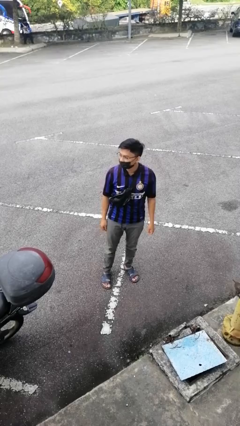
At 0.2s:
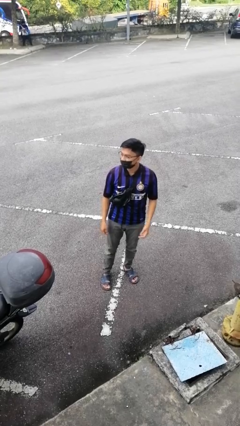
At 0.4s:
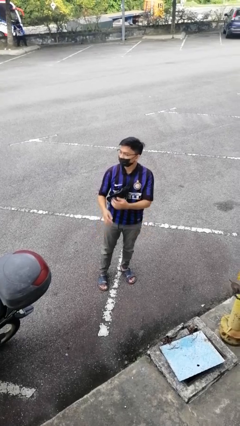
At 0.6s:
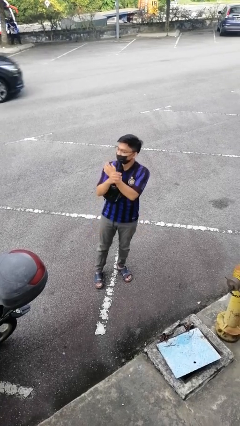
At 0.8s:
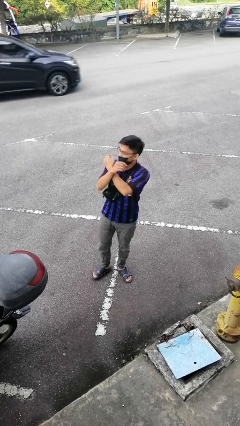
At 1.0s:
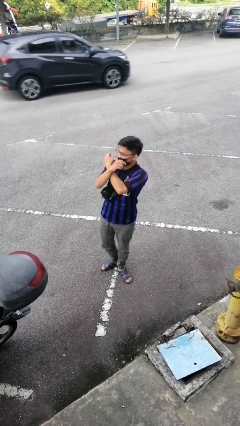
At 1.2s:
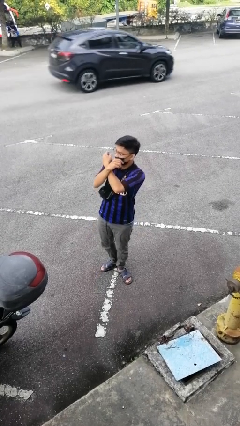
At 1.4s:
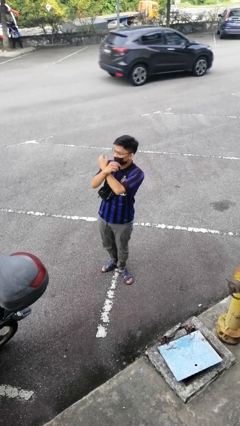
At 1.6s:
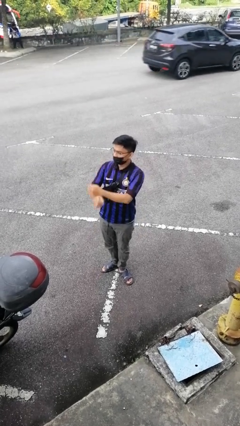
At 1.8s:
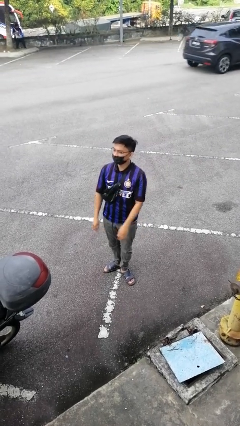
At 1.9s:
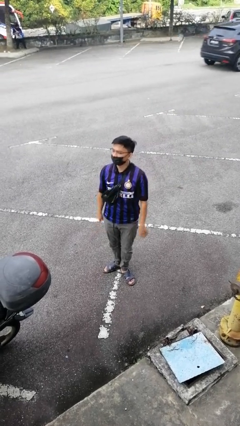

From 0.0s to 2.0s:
person gestures arms x

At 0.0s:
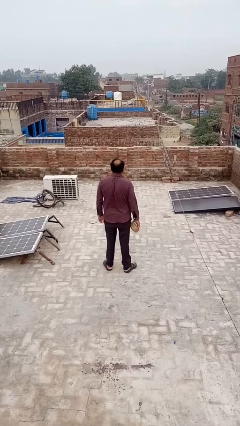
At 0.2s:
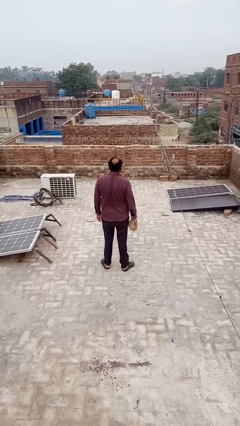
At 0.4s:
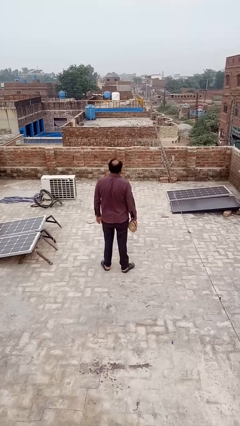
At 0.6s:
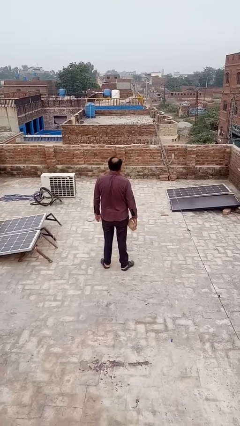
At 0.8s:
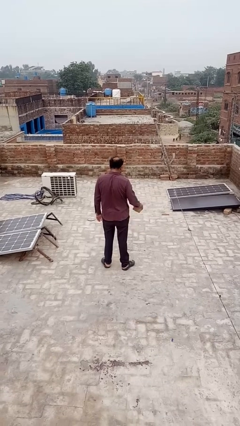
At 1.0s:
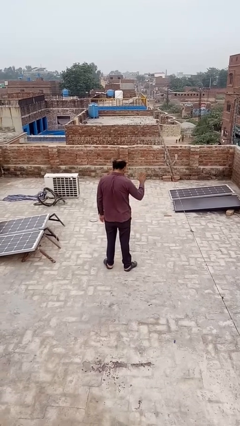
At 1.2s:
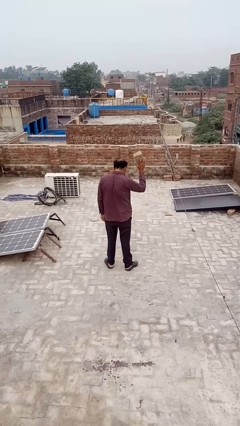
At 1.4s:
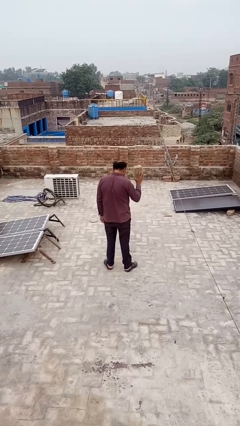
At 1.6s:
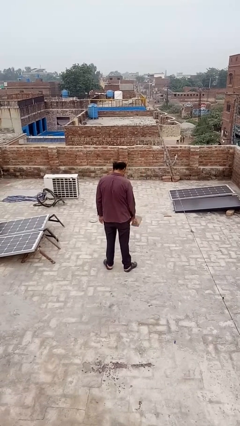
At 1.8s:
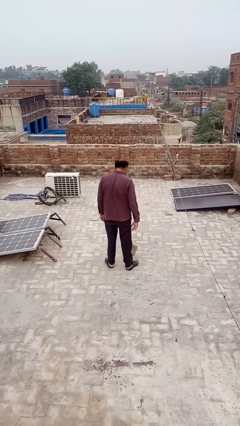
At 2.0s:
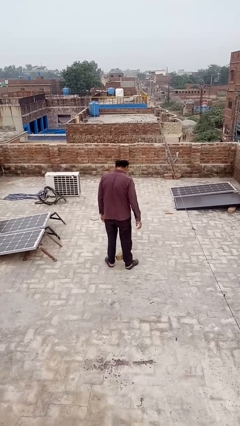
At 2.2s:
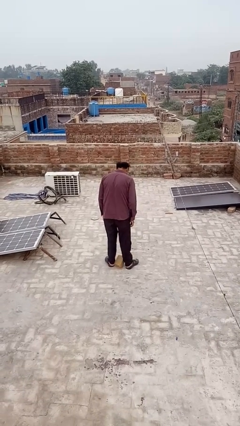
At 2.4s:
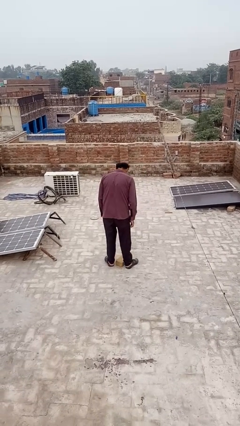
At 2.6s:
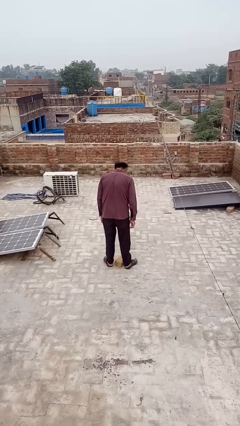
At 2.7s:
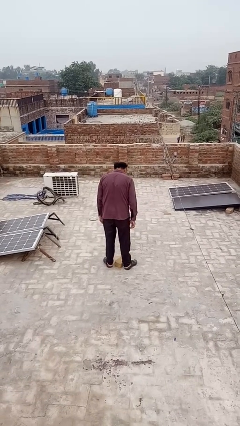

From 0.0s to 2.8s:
person throws object to ground

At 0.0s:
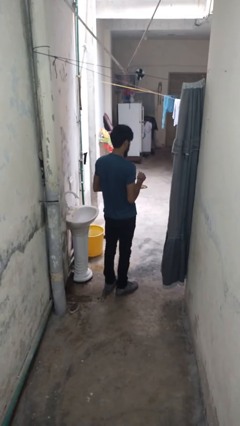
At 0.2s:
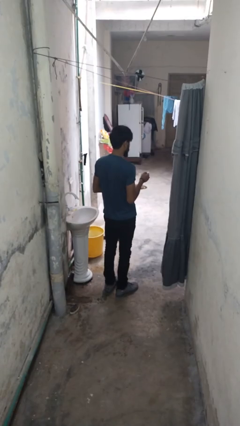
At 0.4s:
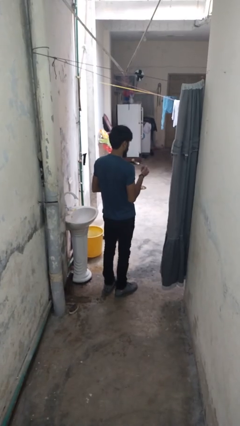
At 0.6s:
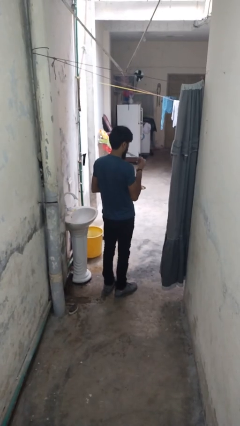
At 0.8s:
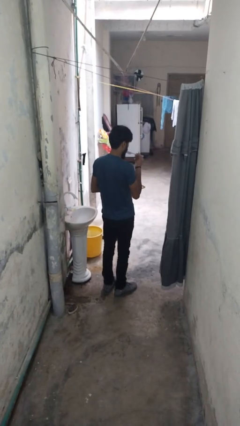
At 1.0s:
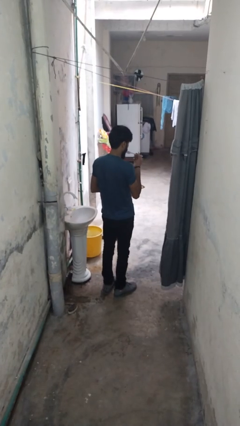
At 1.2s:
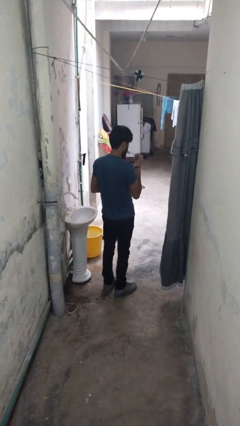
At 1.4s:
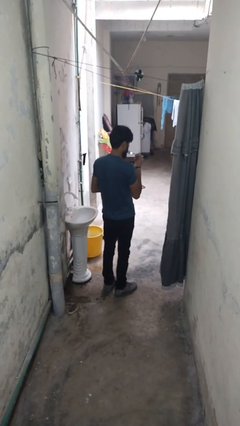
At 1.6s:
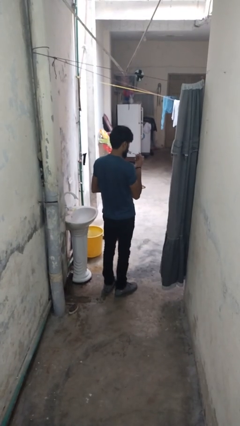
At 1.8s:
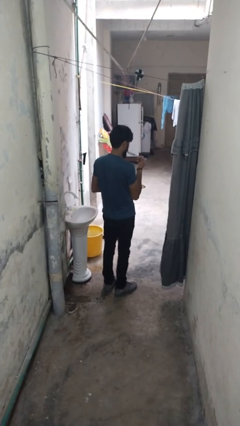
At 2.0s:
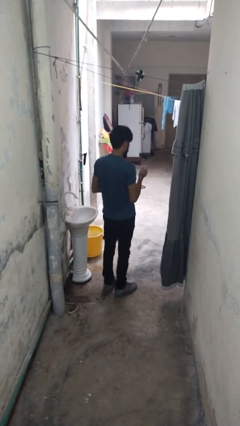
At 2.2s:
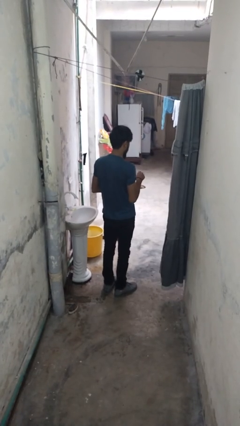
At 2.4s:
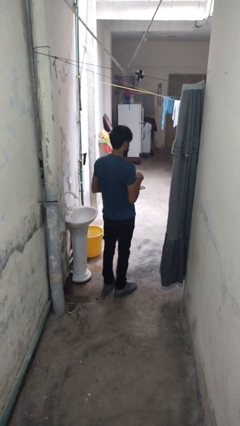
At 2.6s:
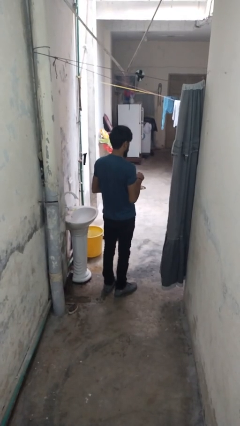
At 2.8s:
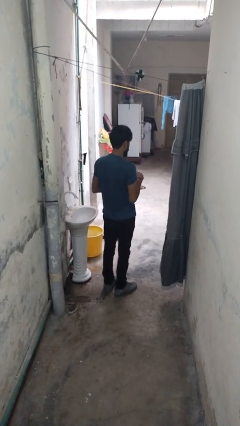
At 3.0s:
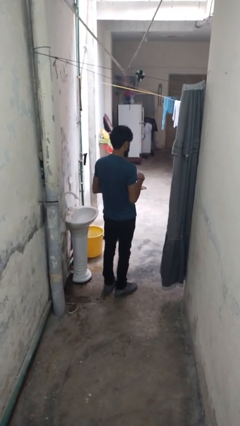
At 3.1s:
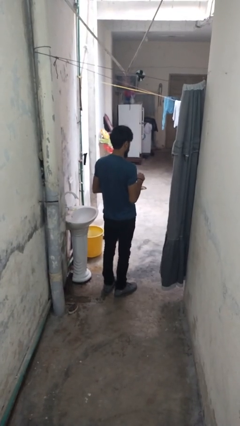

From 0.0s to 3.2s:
person eats with utensil

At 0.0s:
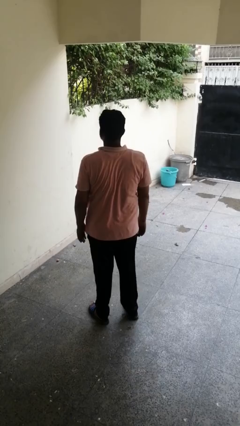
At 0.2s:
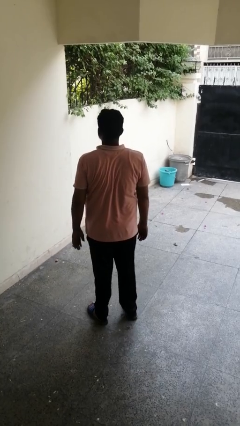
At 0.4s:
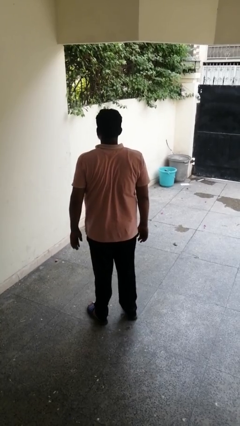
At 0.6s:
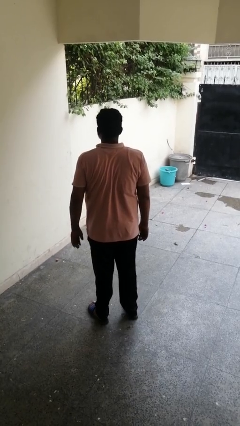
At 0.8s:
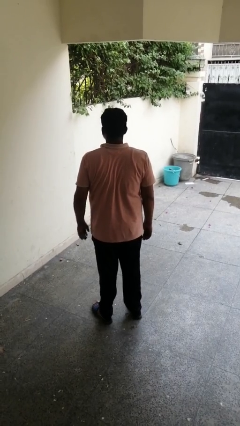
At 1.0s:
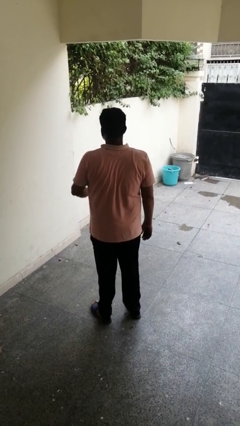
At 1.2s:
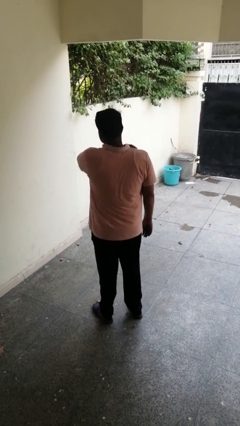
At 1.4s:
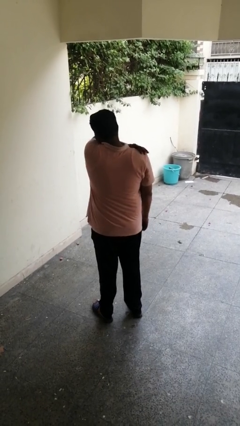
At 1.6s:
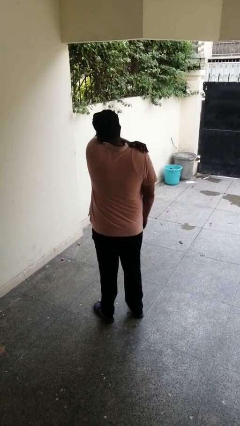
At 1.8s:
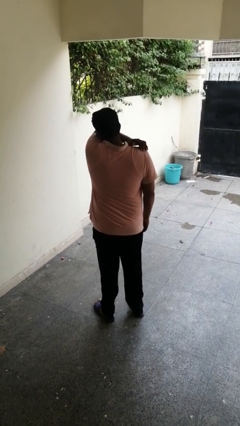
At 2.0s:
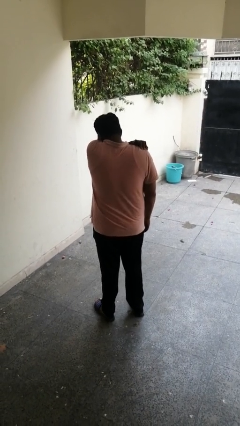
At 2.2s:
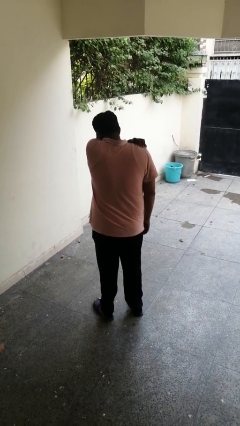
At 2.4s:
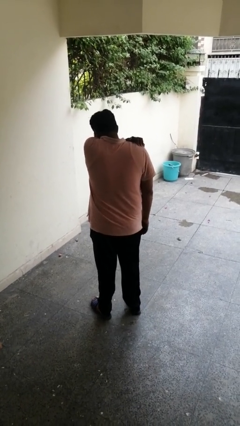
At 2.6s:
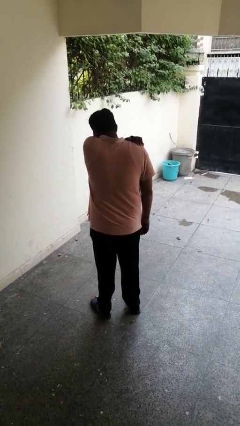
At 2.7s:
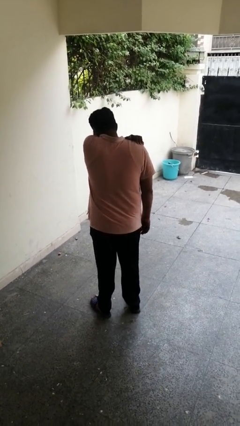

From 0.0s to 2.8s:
person sneezes into arm

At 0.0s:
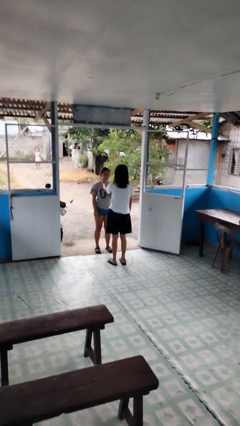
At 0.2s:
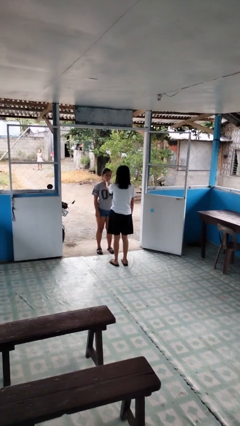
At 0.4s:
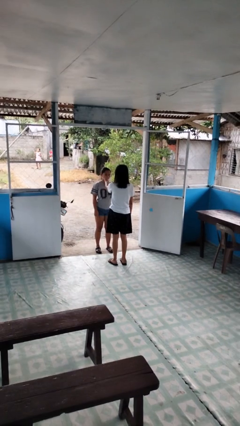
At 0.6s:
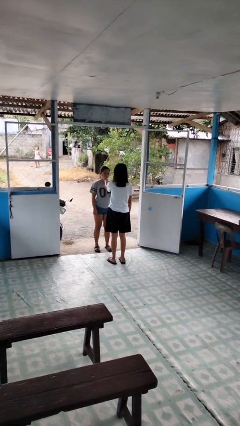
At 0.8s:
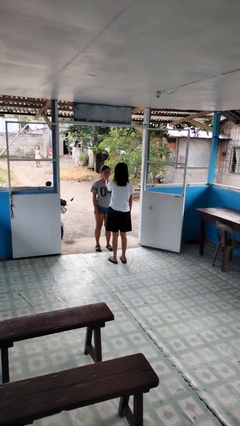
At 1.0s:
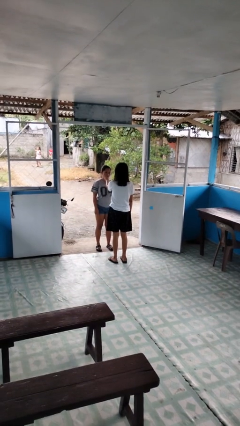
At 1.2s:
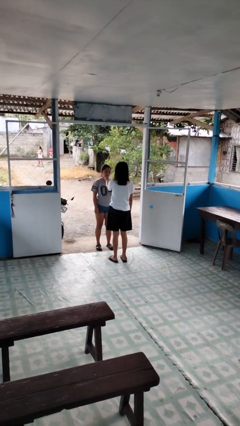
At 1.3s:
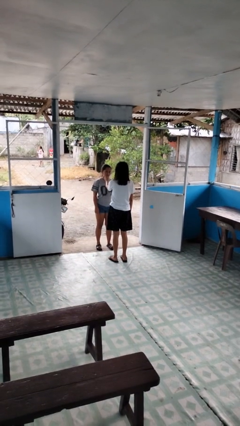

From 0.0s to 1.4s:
person touches face of person

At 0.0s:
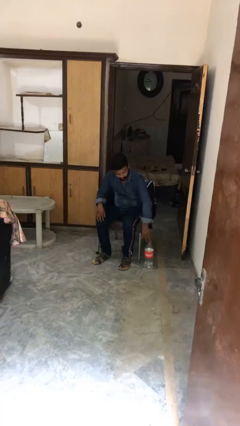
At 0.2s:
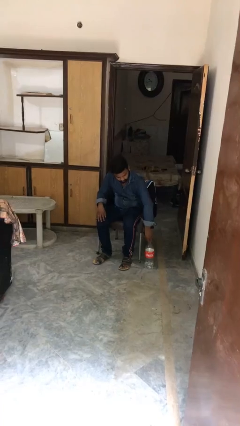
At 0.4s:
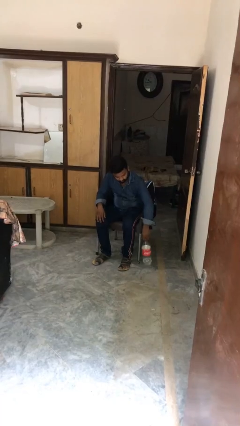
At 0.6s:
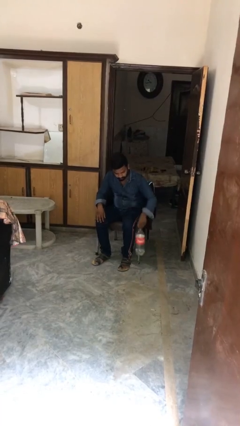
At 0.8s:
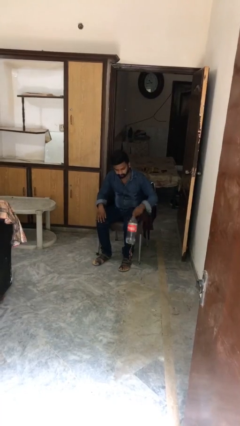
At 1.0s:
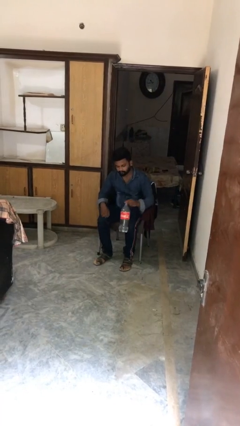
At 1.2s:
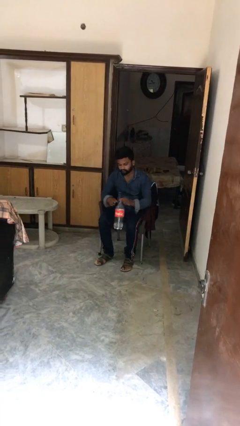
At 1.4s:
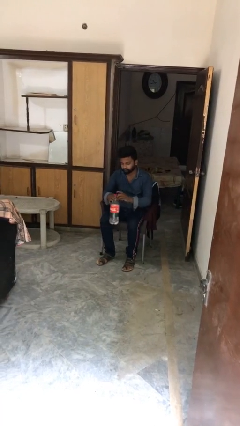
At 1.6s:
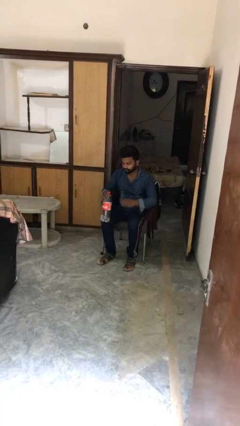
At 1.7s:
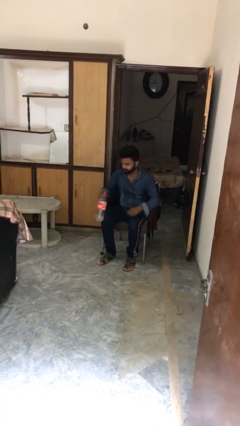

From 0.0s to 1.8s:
person picks up object from floor

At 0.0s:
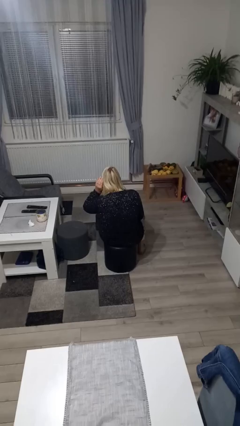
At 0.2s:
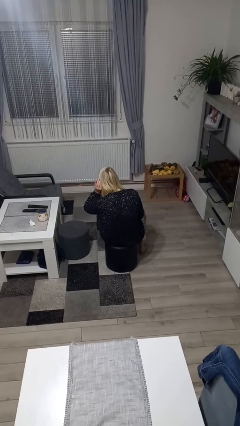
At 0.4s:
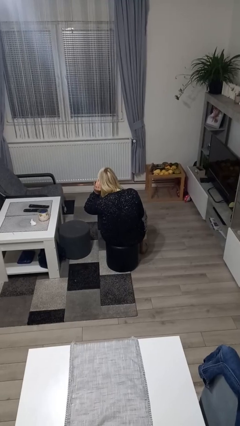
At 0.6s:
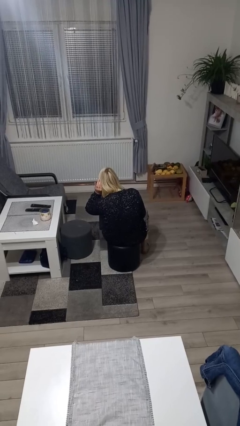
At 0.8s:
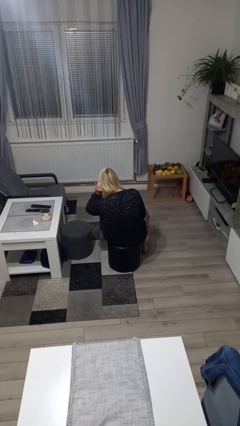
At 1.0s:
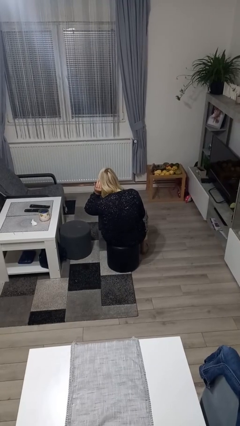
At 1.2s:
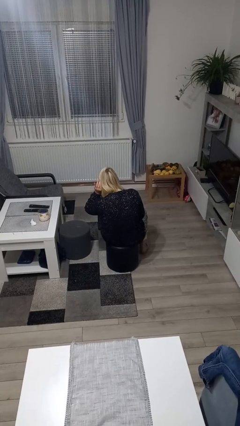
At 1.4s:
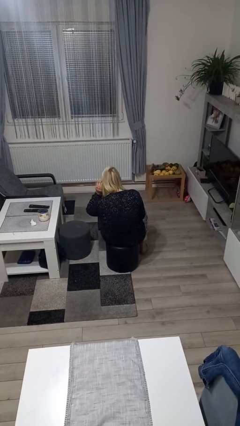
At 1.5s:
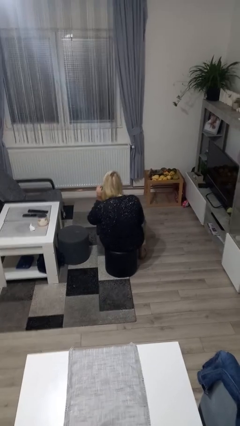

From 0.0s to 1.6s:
person gestures listen closely

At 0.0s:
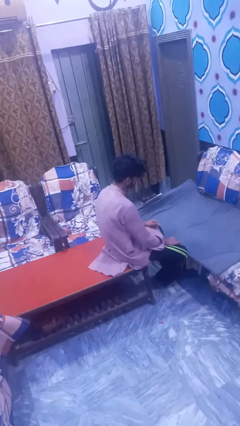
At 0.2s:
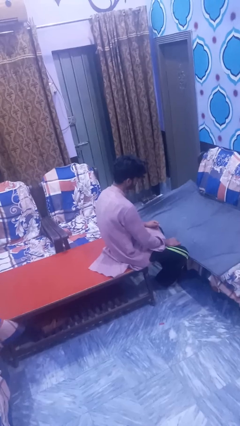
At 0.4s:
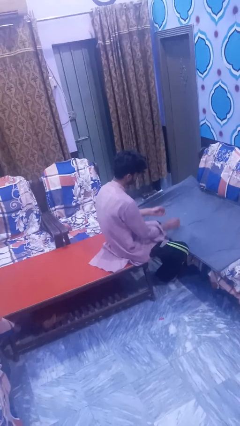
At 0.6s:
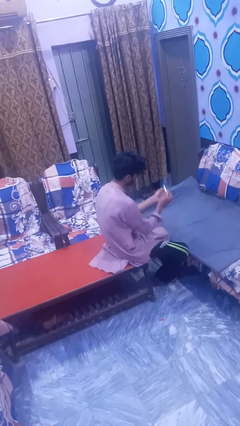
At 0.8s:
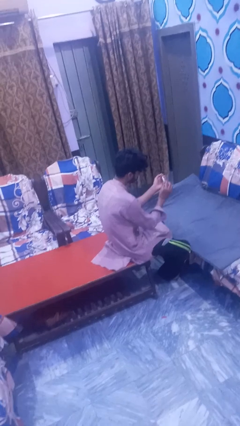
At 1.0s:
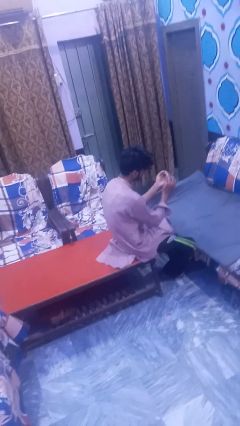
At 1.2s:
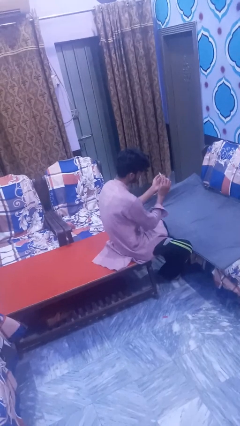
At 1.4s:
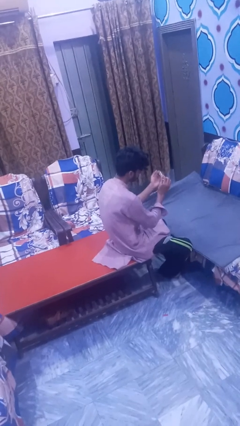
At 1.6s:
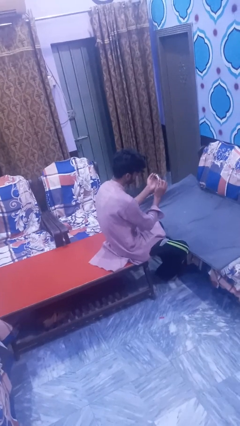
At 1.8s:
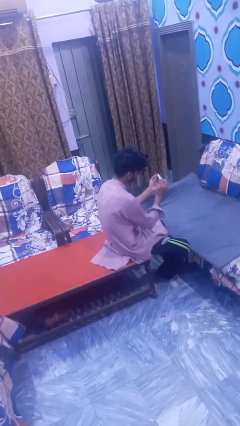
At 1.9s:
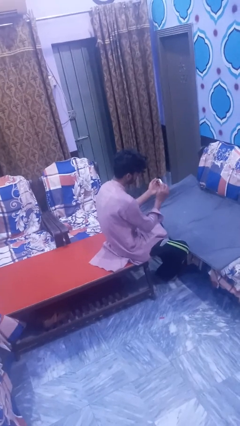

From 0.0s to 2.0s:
person files fingernails
